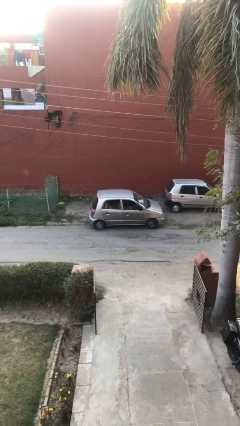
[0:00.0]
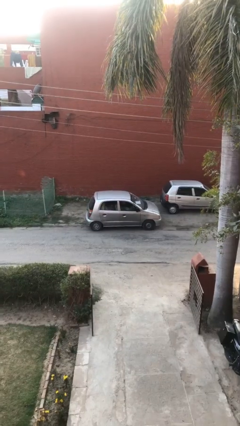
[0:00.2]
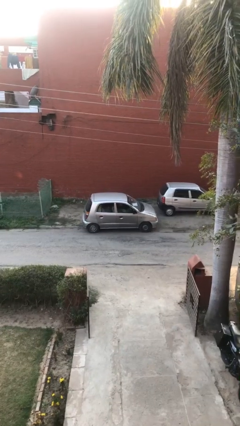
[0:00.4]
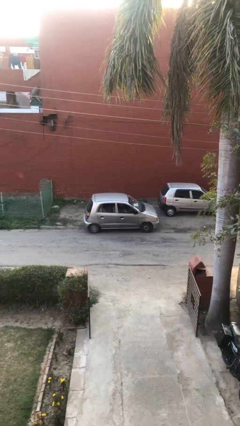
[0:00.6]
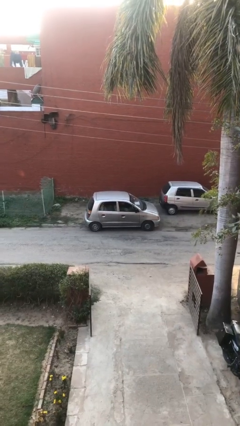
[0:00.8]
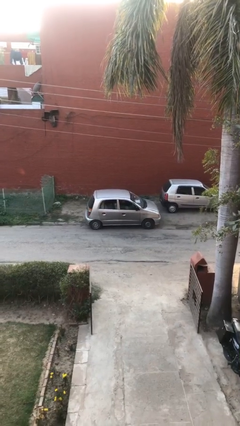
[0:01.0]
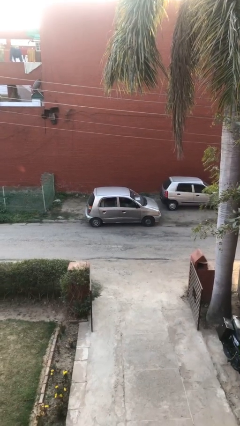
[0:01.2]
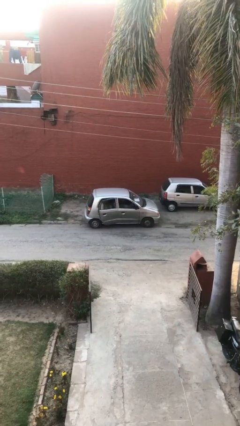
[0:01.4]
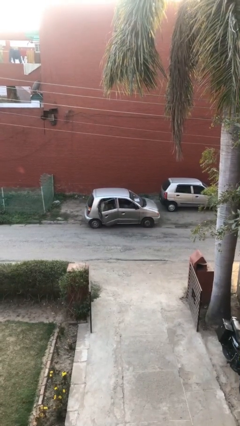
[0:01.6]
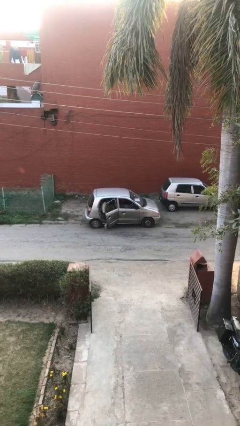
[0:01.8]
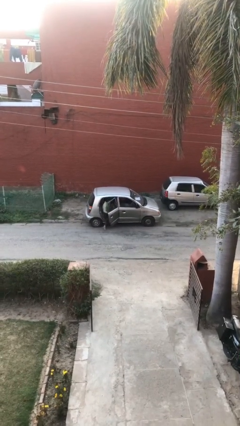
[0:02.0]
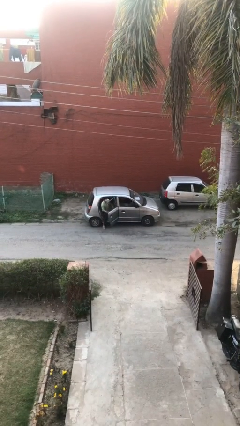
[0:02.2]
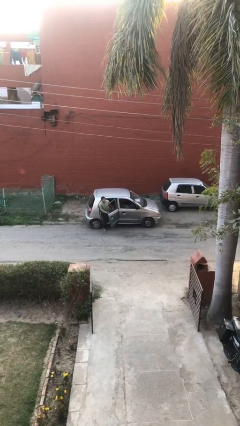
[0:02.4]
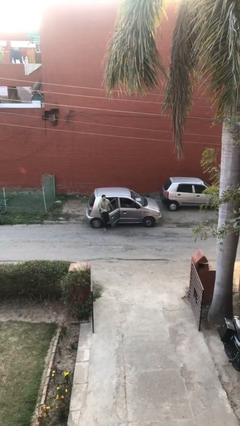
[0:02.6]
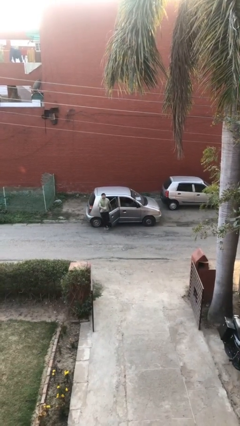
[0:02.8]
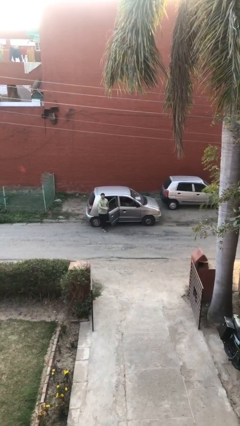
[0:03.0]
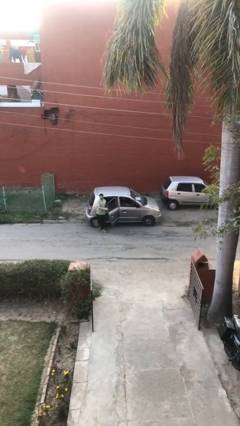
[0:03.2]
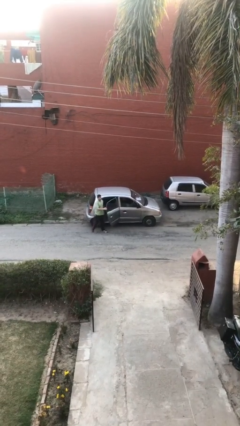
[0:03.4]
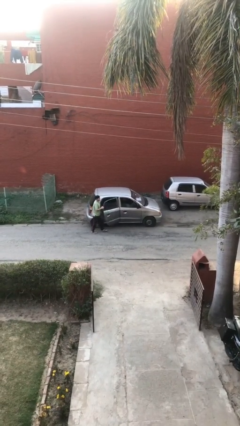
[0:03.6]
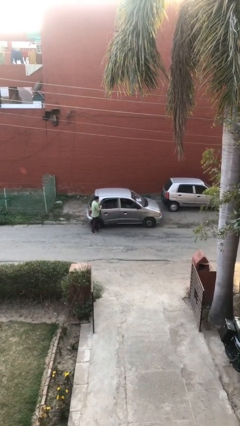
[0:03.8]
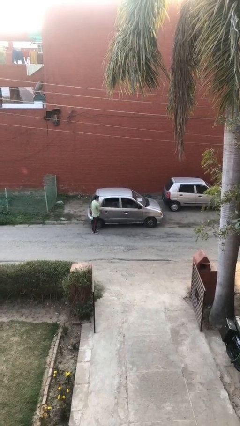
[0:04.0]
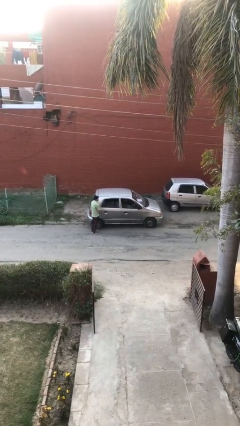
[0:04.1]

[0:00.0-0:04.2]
car drops off person

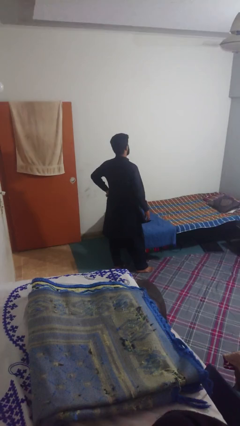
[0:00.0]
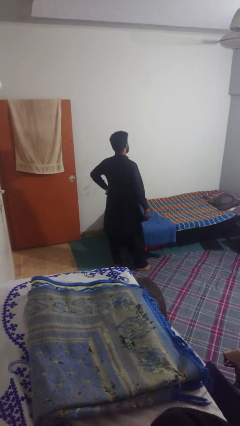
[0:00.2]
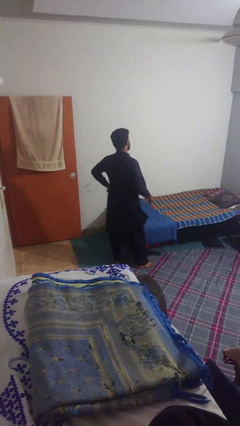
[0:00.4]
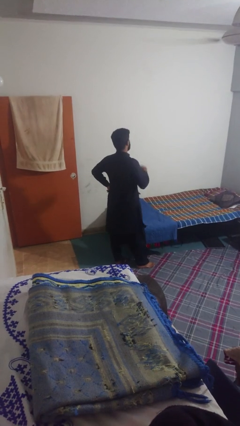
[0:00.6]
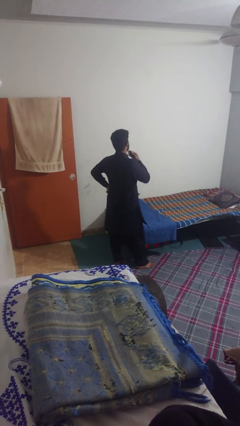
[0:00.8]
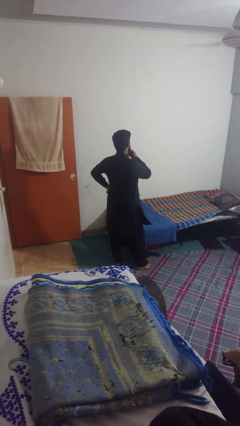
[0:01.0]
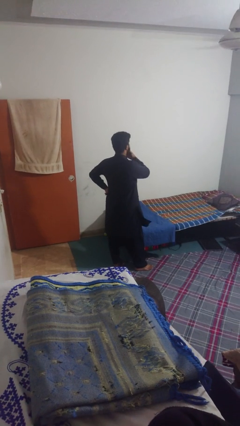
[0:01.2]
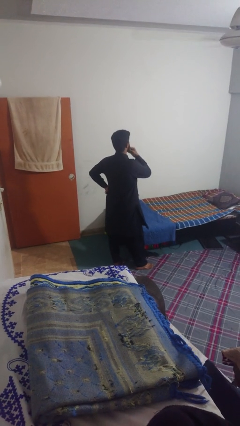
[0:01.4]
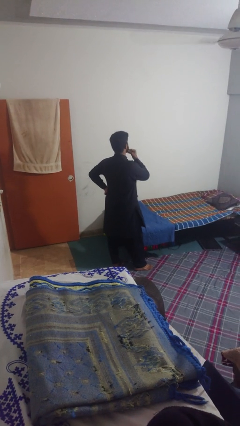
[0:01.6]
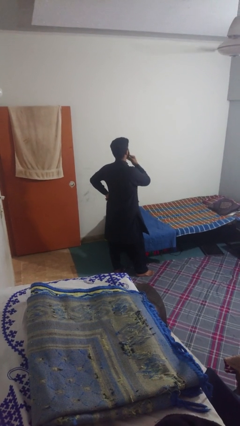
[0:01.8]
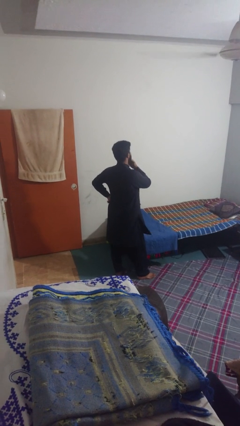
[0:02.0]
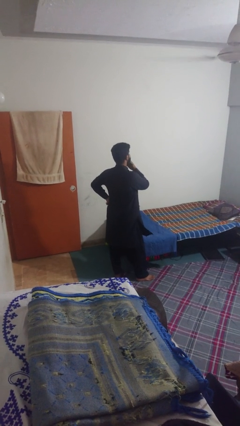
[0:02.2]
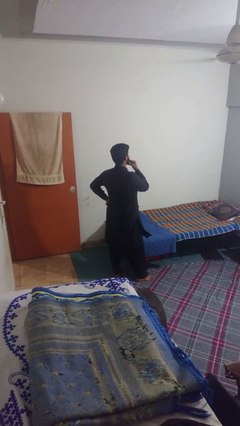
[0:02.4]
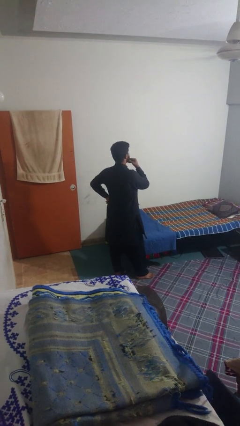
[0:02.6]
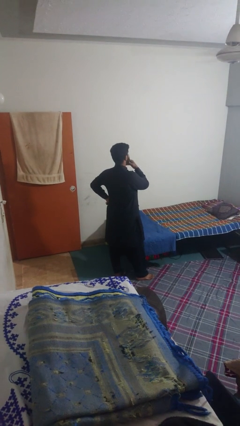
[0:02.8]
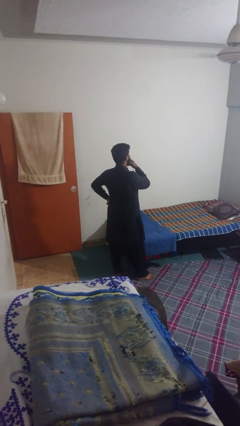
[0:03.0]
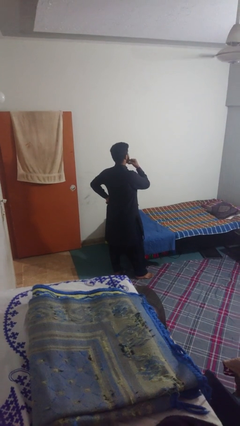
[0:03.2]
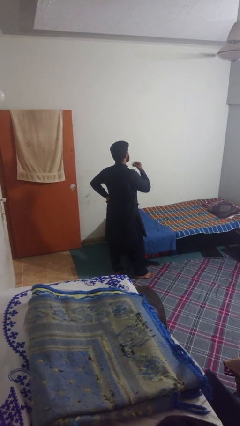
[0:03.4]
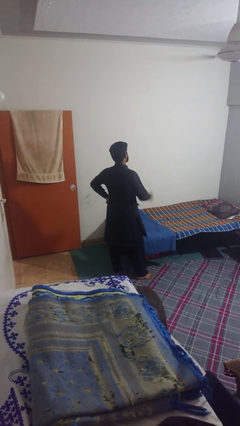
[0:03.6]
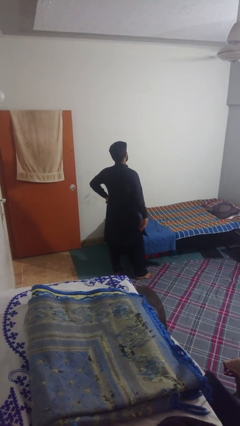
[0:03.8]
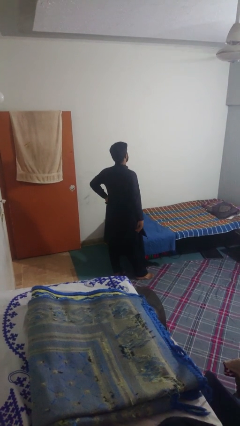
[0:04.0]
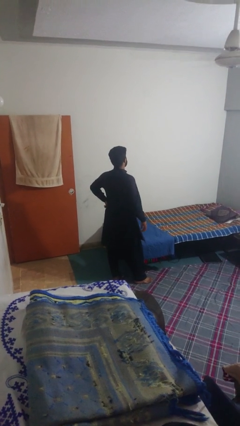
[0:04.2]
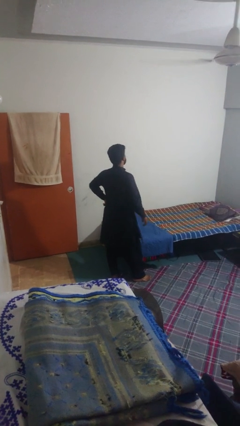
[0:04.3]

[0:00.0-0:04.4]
person strokes chin

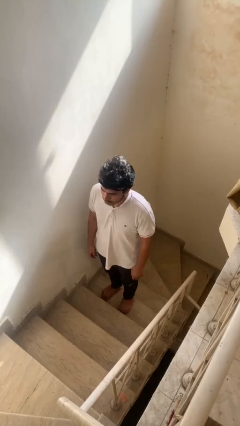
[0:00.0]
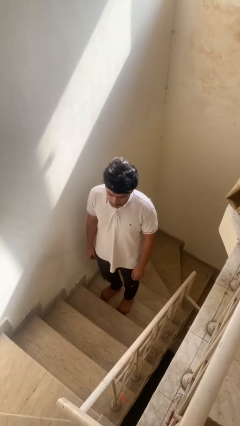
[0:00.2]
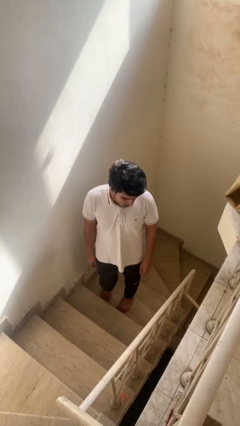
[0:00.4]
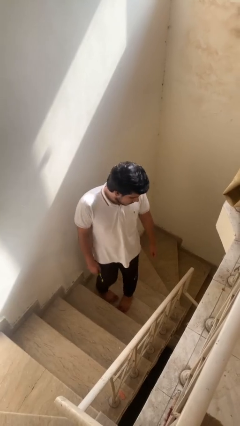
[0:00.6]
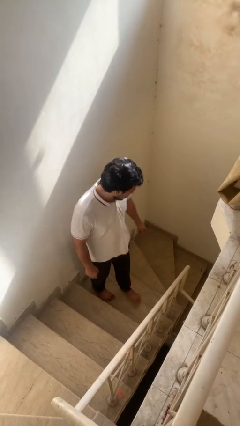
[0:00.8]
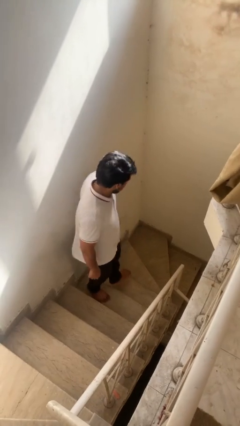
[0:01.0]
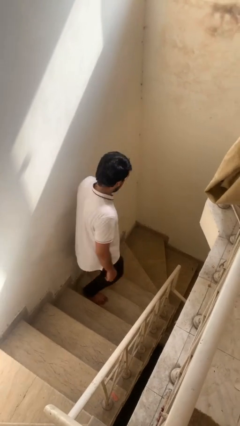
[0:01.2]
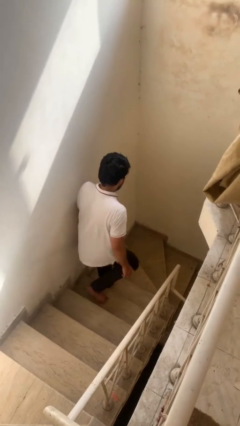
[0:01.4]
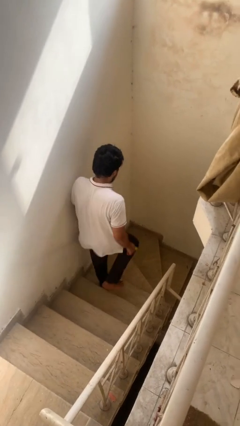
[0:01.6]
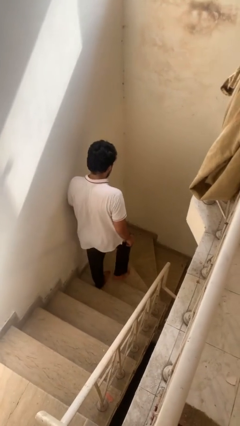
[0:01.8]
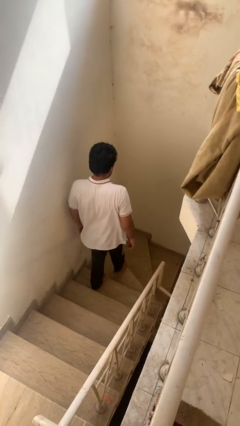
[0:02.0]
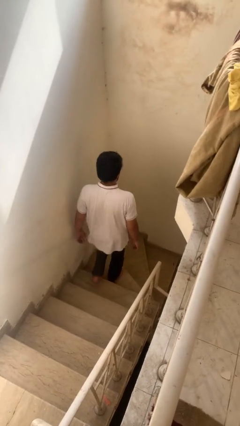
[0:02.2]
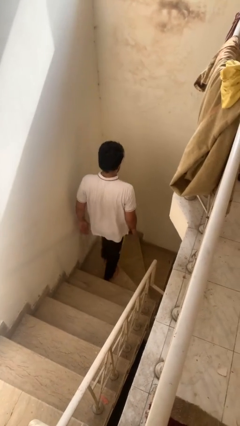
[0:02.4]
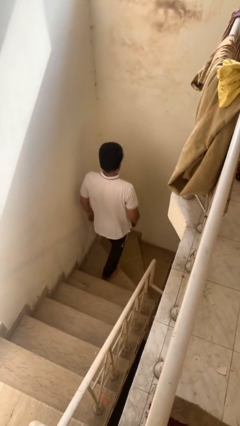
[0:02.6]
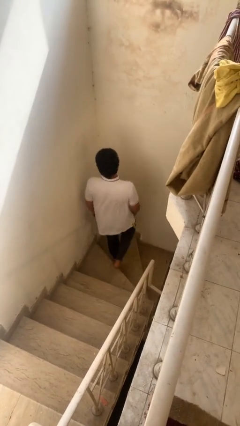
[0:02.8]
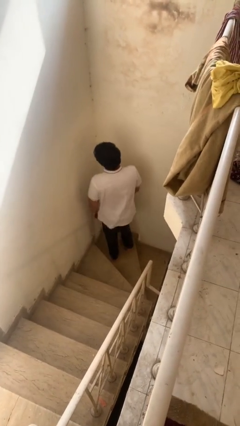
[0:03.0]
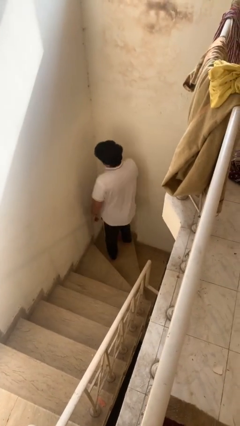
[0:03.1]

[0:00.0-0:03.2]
person climbs down stairs

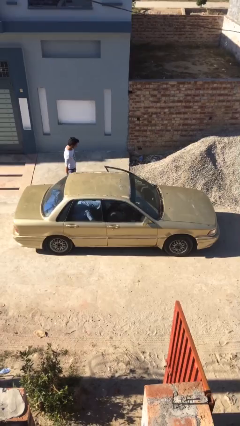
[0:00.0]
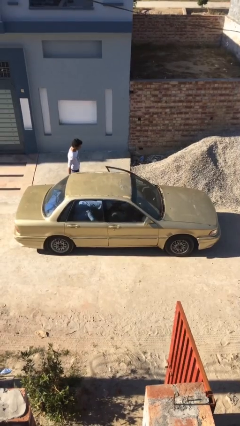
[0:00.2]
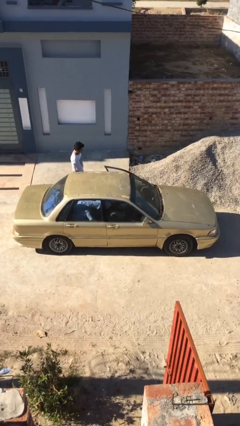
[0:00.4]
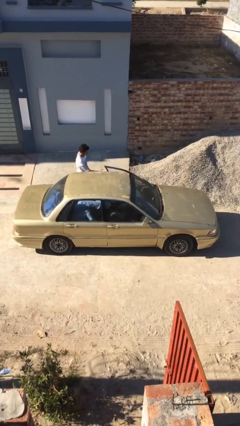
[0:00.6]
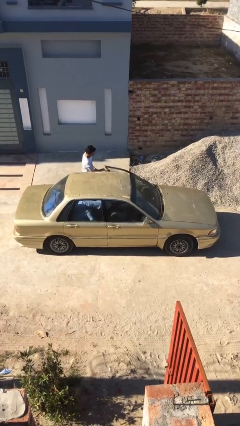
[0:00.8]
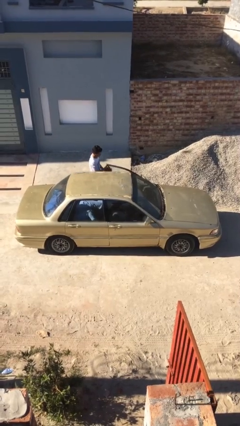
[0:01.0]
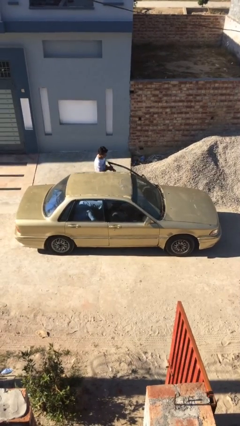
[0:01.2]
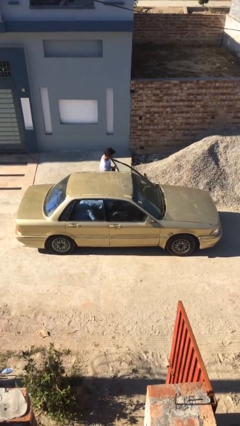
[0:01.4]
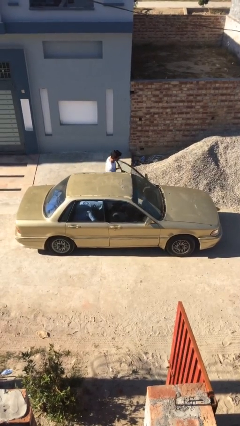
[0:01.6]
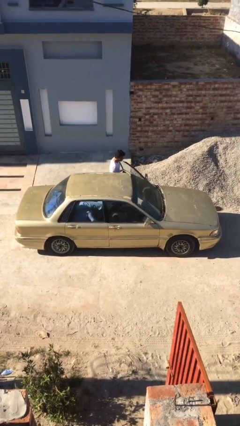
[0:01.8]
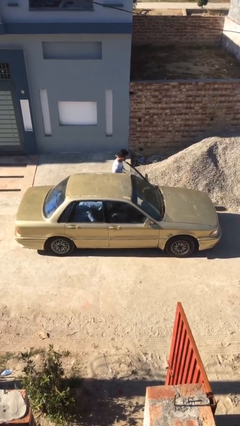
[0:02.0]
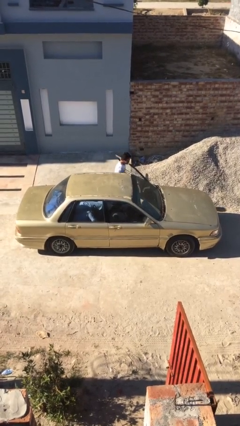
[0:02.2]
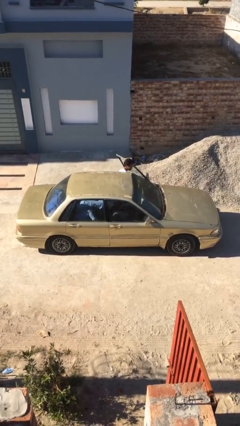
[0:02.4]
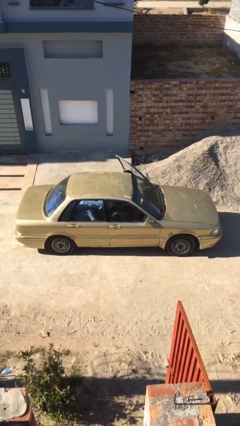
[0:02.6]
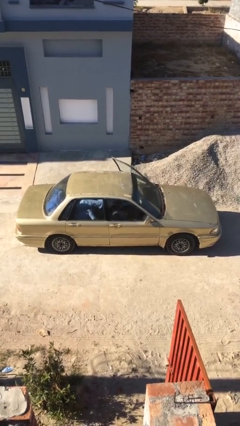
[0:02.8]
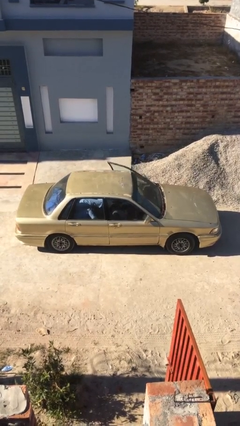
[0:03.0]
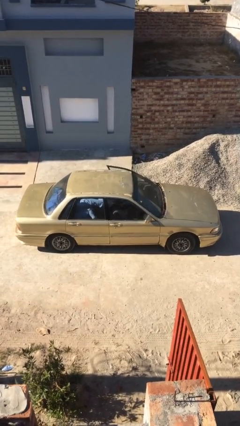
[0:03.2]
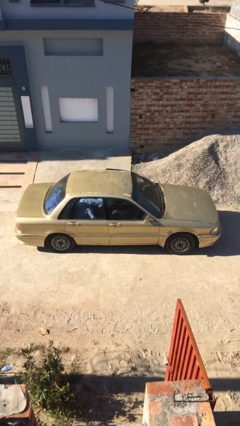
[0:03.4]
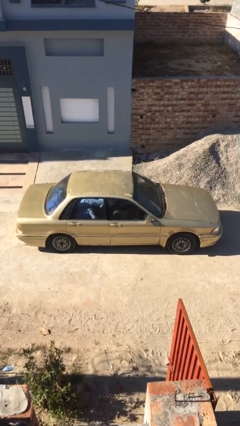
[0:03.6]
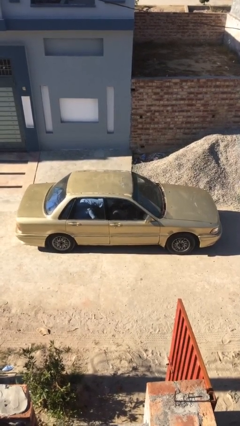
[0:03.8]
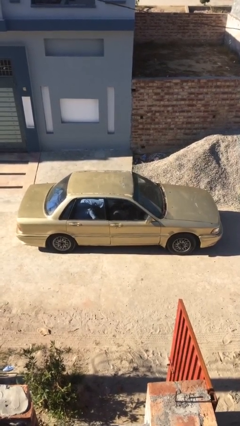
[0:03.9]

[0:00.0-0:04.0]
car picks up person

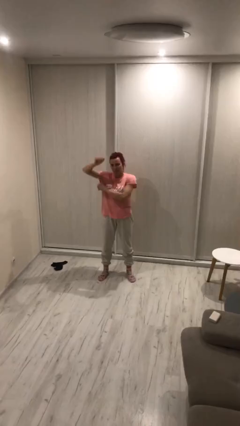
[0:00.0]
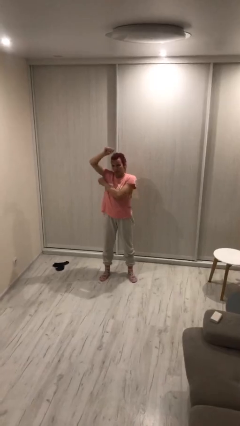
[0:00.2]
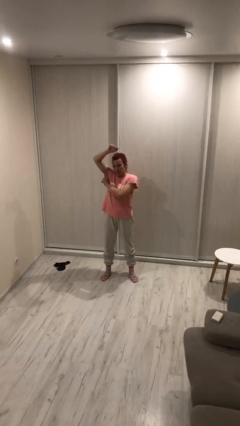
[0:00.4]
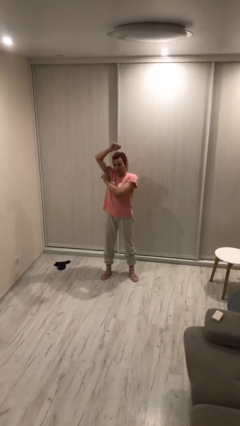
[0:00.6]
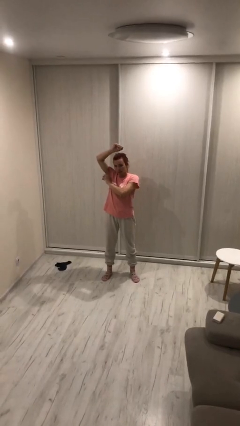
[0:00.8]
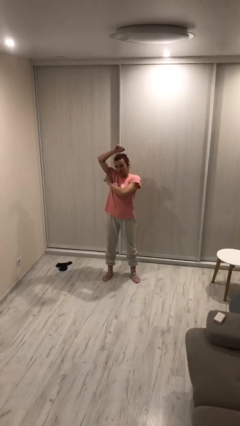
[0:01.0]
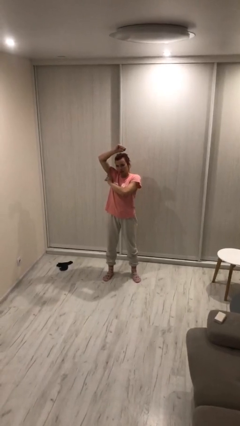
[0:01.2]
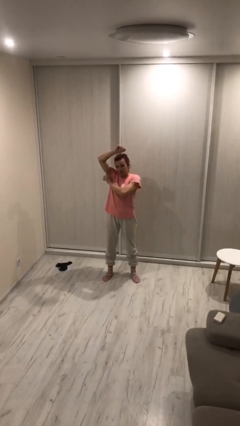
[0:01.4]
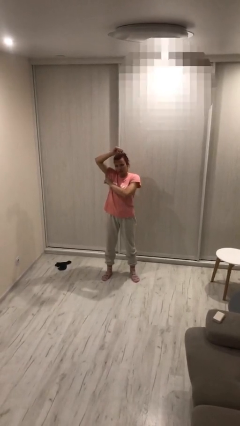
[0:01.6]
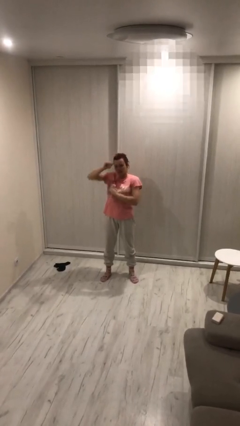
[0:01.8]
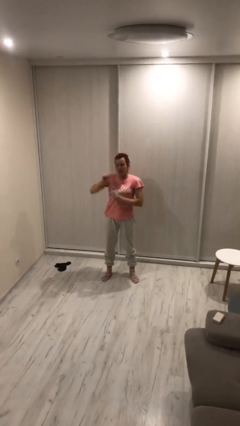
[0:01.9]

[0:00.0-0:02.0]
person applies deodorant
